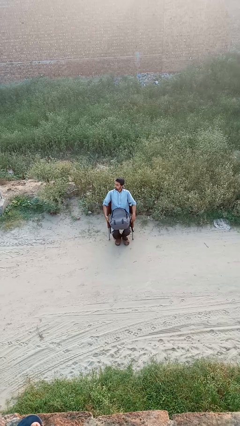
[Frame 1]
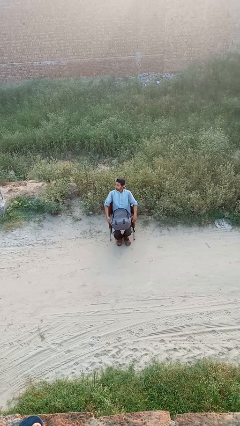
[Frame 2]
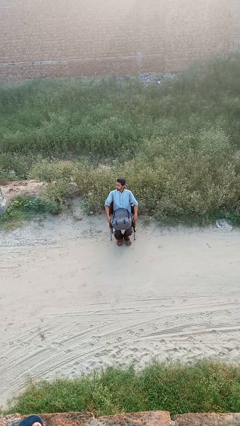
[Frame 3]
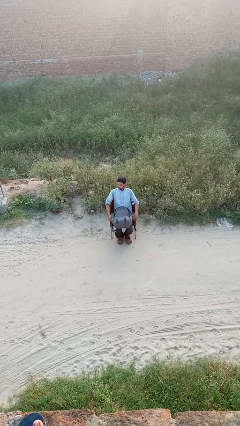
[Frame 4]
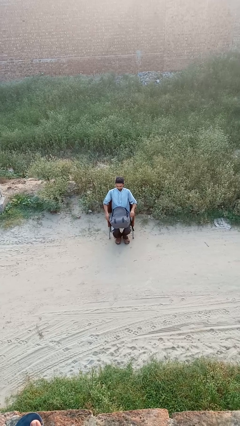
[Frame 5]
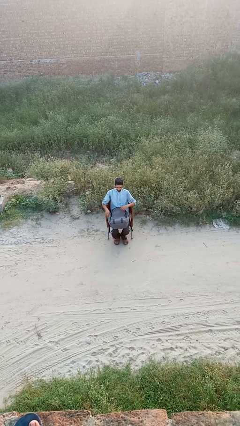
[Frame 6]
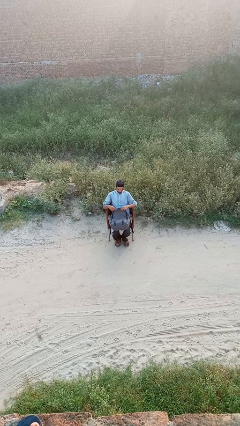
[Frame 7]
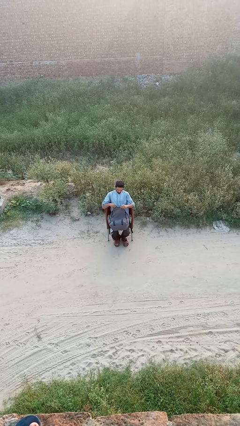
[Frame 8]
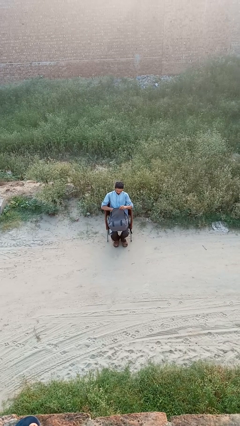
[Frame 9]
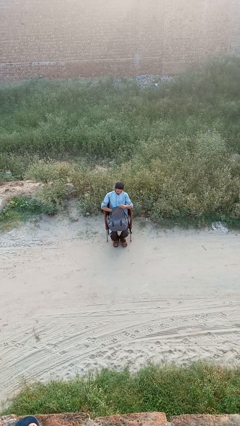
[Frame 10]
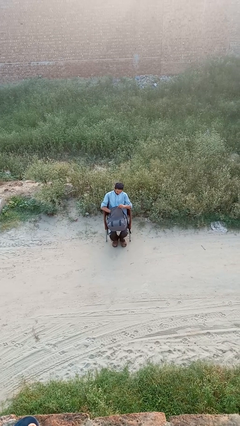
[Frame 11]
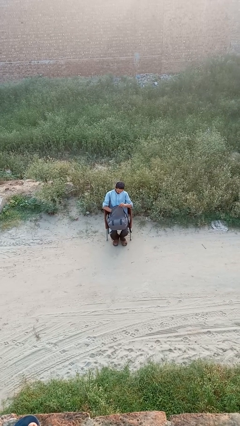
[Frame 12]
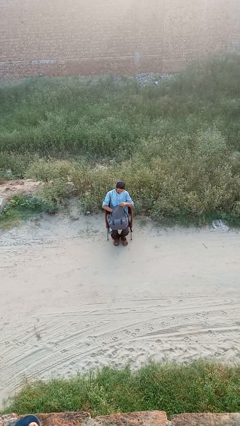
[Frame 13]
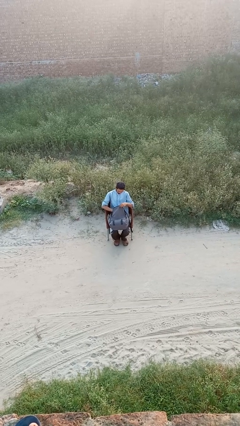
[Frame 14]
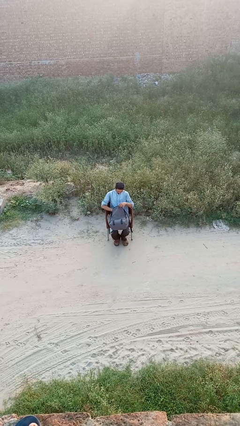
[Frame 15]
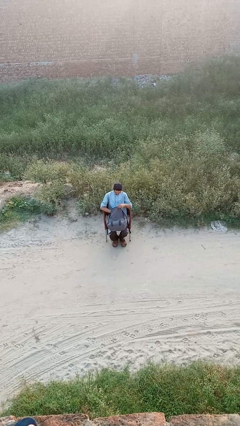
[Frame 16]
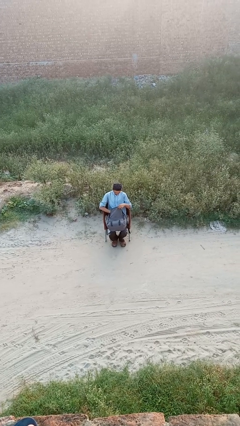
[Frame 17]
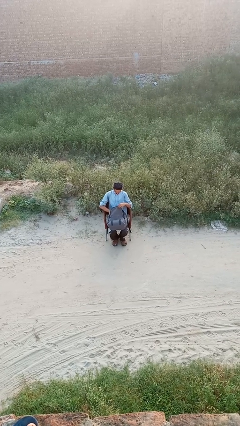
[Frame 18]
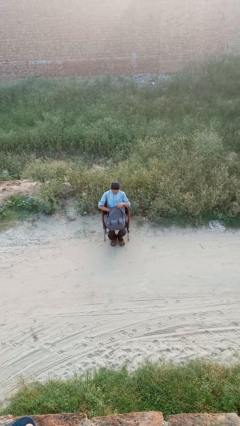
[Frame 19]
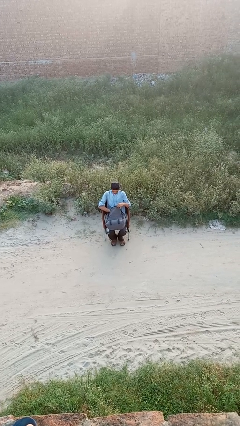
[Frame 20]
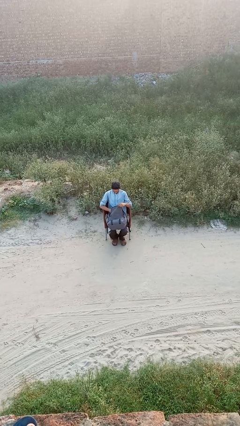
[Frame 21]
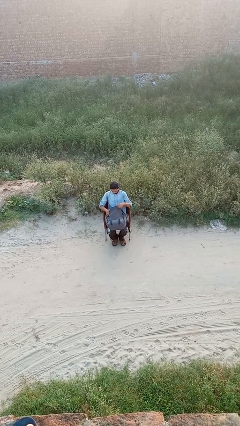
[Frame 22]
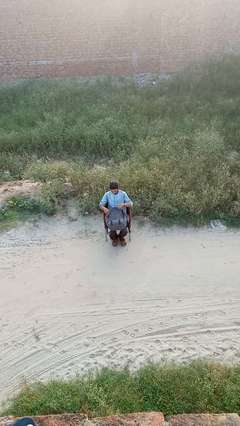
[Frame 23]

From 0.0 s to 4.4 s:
person searches in backpack

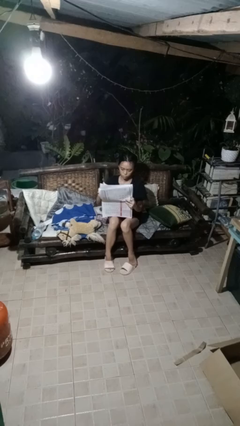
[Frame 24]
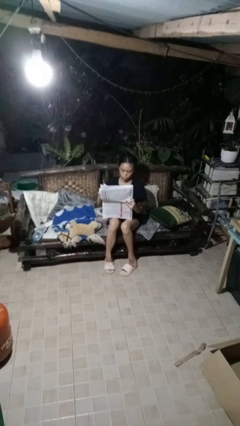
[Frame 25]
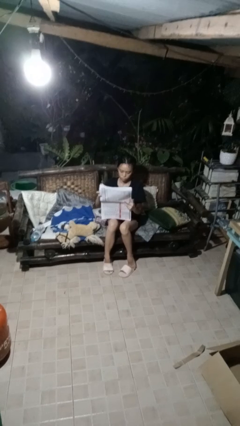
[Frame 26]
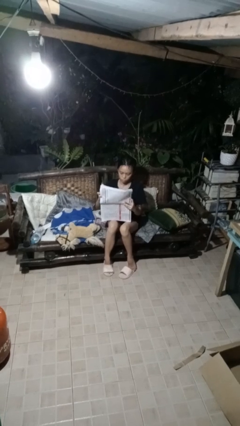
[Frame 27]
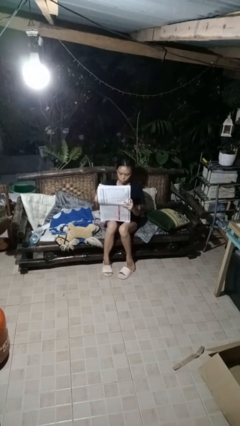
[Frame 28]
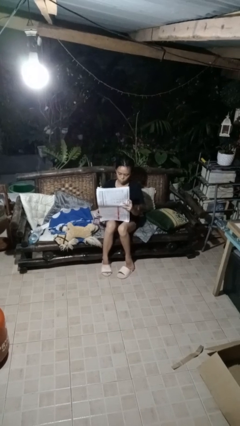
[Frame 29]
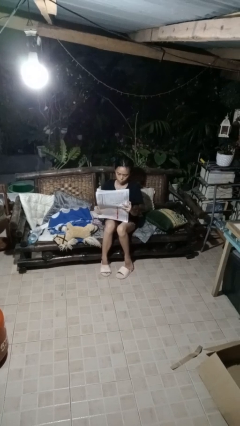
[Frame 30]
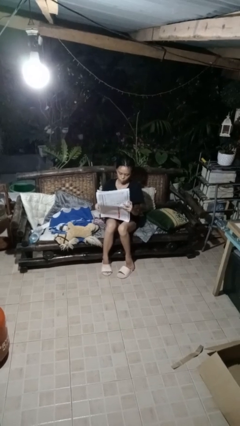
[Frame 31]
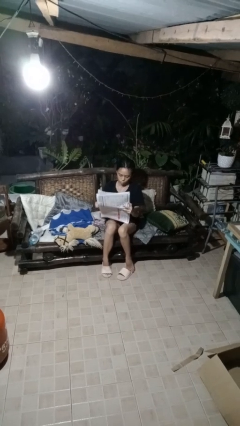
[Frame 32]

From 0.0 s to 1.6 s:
person reads newspaper

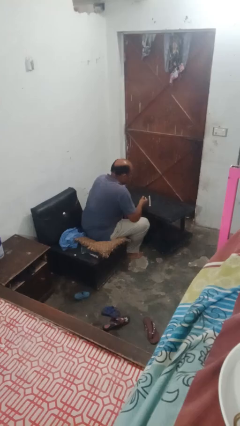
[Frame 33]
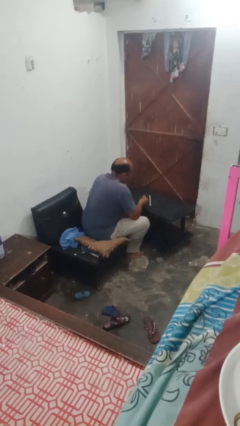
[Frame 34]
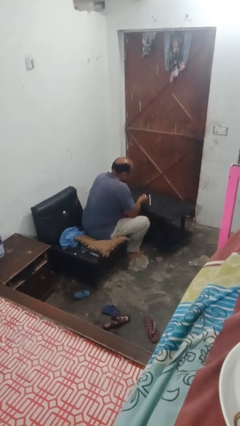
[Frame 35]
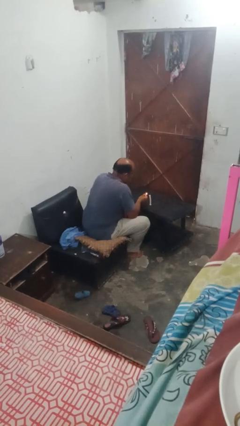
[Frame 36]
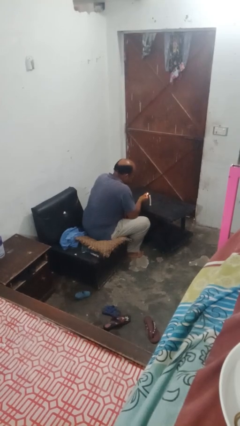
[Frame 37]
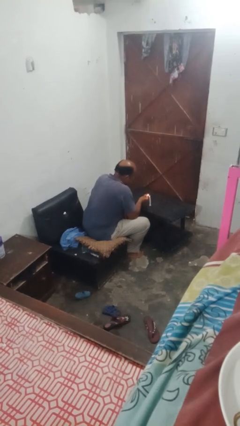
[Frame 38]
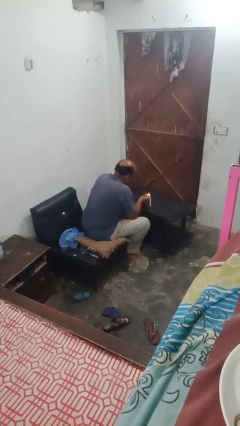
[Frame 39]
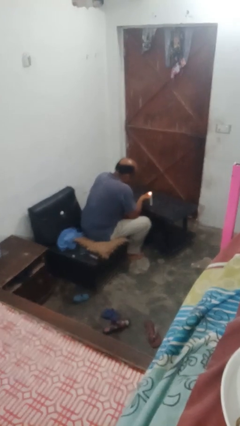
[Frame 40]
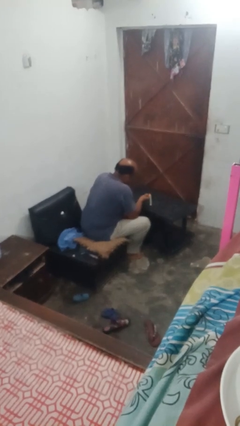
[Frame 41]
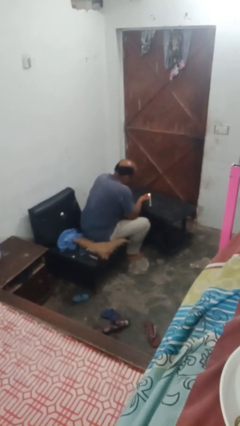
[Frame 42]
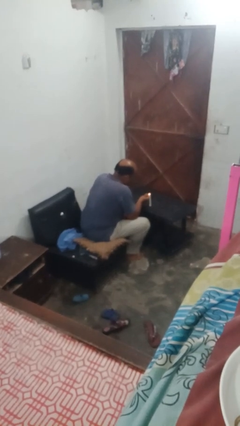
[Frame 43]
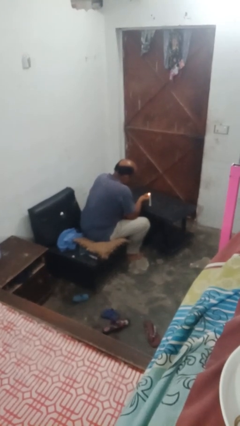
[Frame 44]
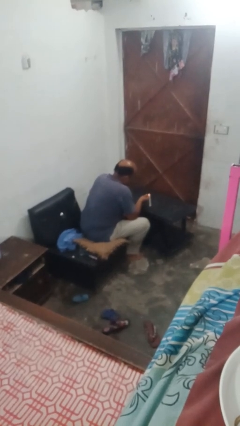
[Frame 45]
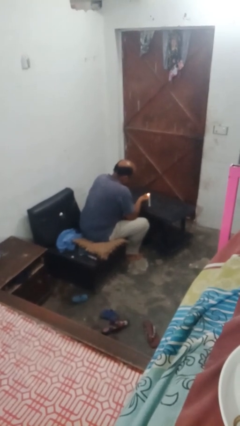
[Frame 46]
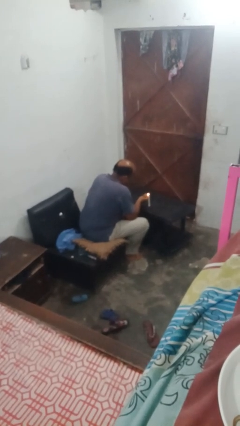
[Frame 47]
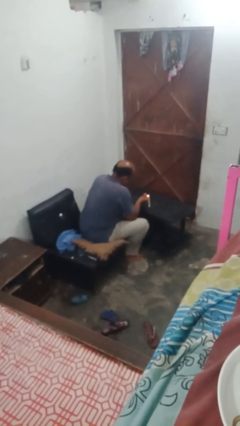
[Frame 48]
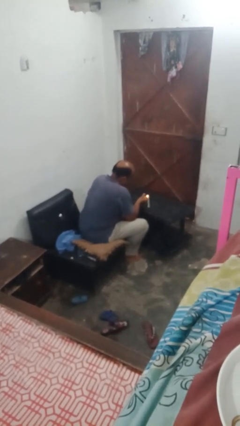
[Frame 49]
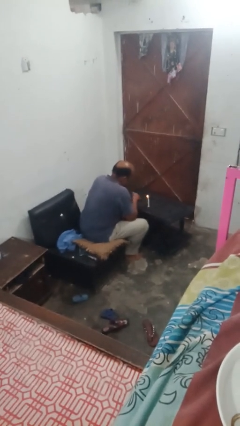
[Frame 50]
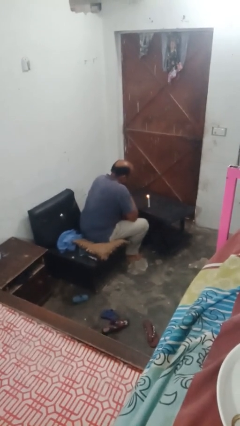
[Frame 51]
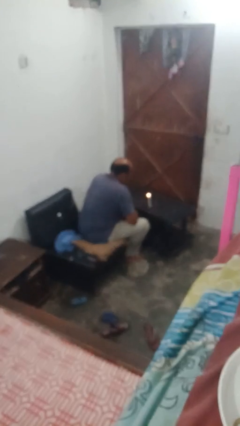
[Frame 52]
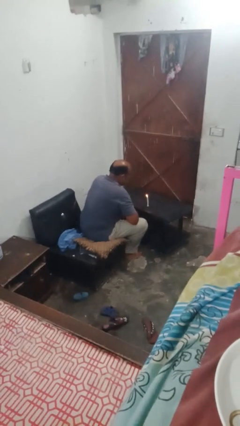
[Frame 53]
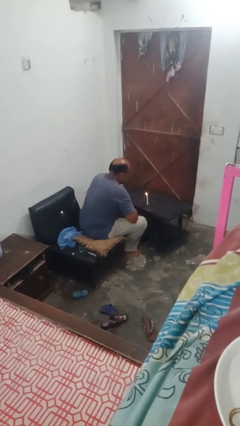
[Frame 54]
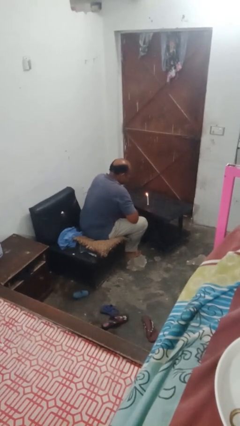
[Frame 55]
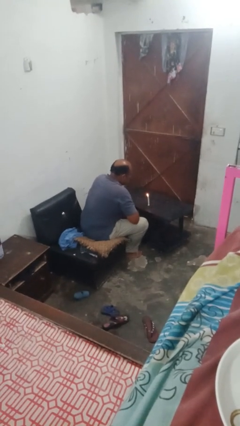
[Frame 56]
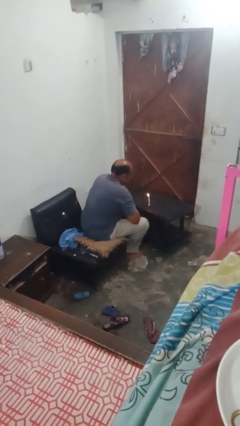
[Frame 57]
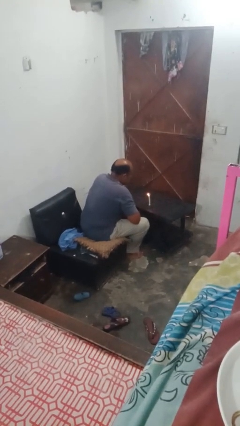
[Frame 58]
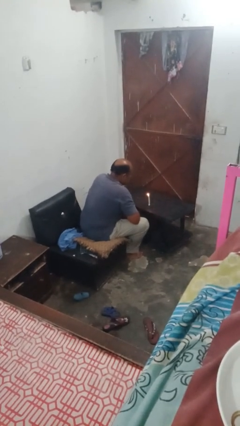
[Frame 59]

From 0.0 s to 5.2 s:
person lights candle

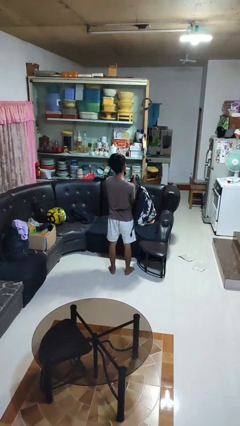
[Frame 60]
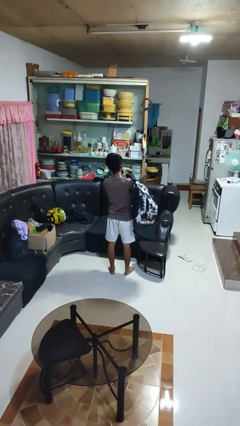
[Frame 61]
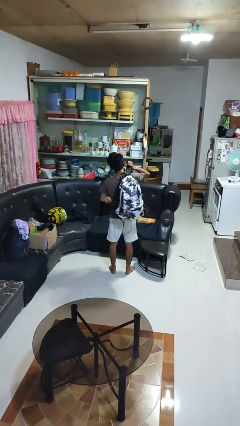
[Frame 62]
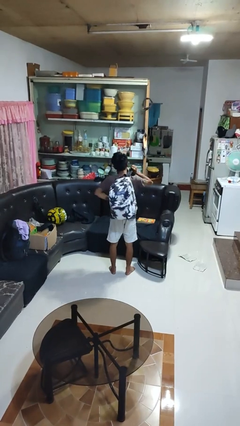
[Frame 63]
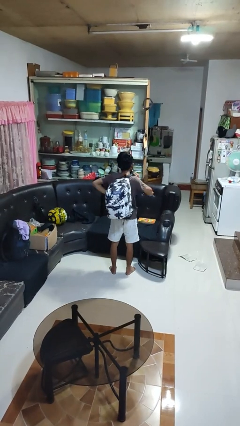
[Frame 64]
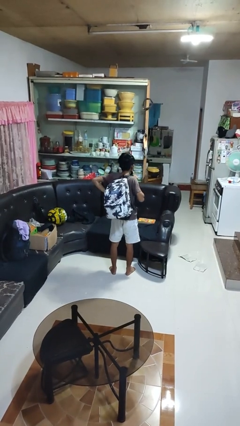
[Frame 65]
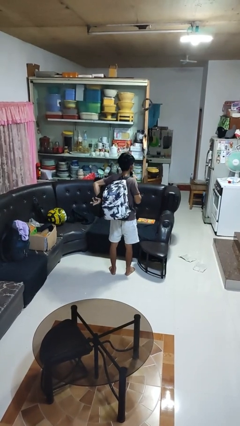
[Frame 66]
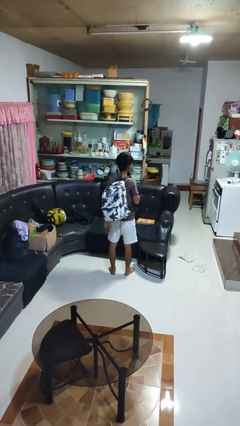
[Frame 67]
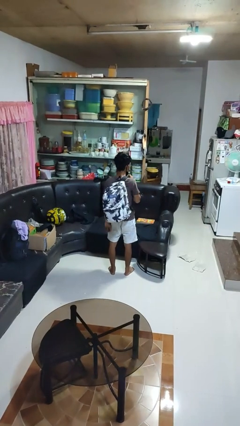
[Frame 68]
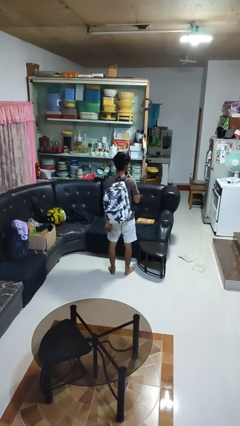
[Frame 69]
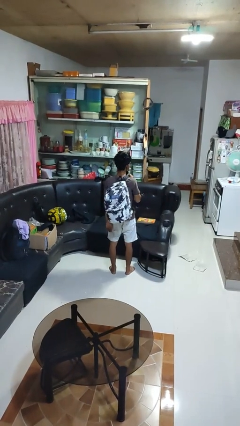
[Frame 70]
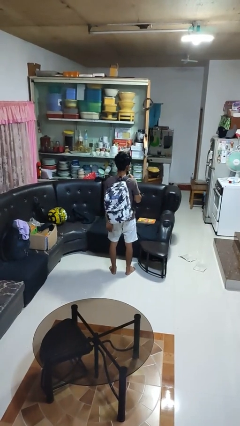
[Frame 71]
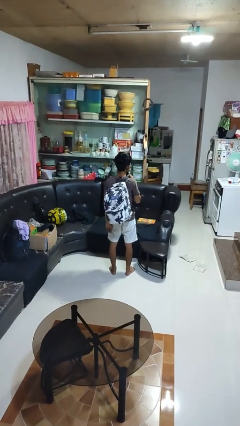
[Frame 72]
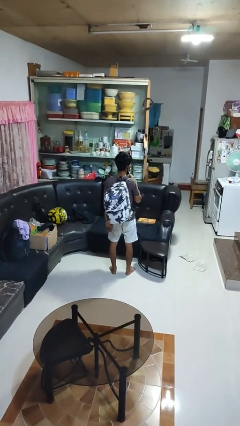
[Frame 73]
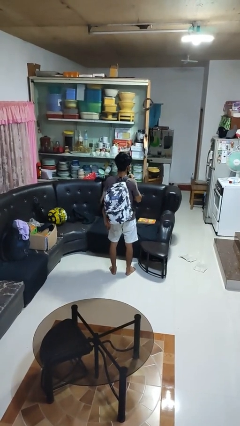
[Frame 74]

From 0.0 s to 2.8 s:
person puts on backpack

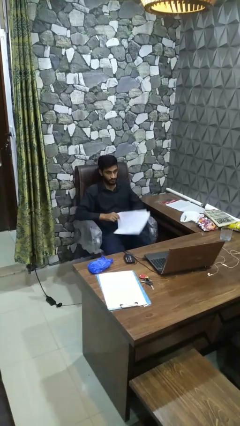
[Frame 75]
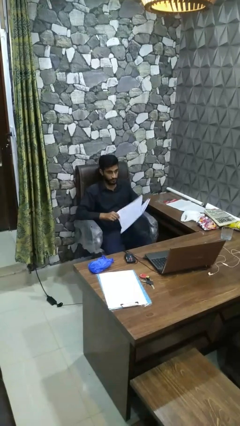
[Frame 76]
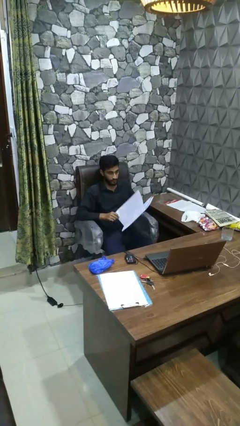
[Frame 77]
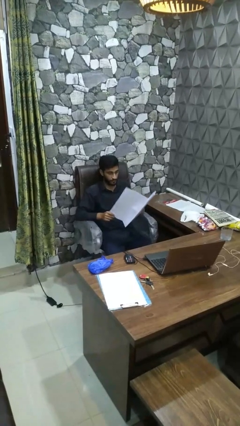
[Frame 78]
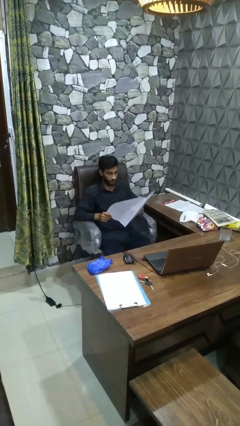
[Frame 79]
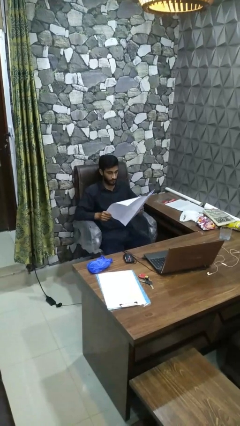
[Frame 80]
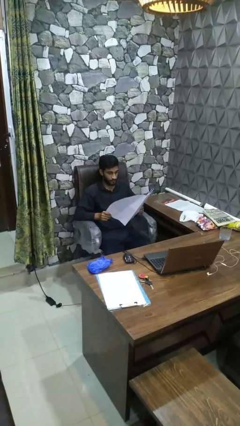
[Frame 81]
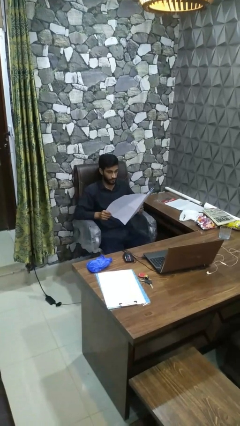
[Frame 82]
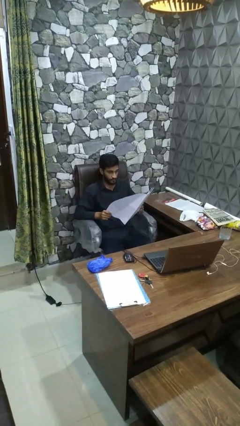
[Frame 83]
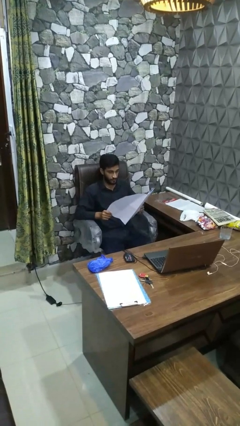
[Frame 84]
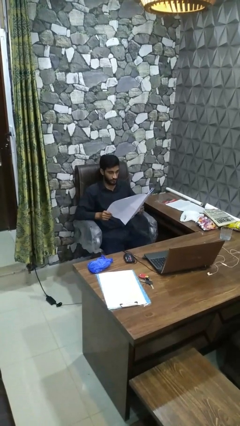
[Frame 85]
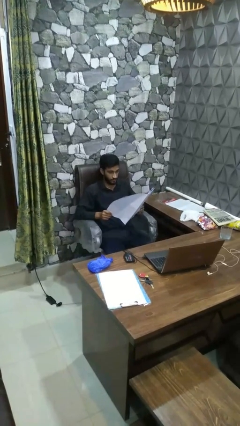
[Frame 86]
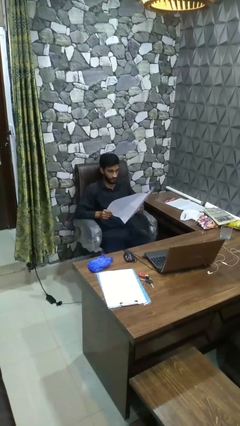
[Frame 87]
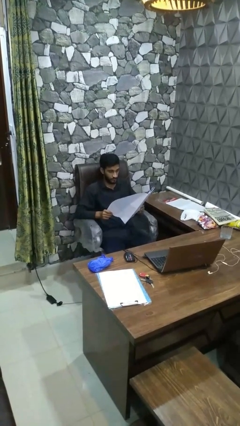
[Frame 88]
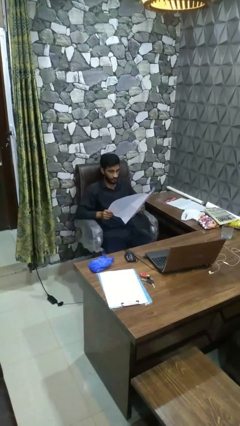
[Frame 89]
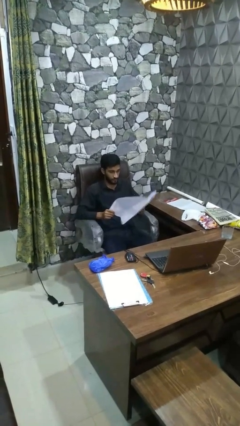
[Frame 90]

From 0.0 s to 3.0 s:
person reads magazine
